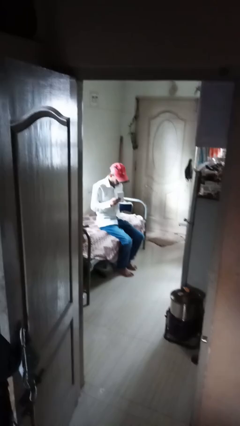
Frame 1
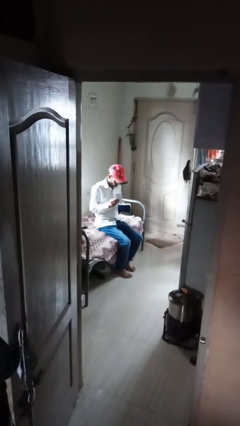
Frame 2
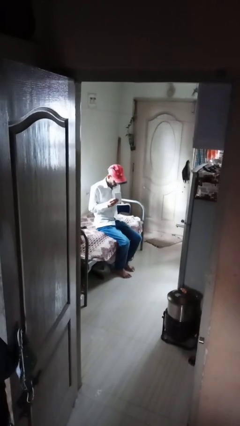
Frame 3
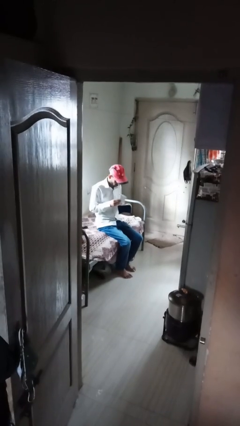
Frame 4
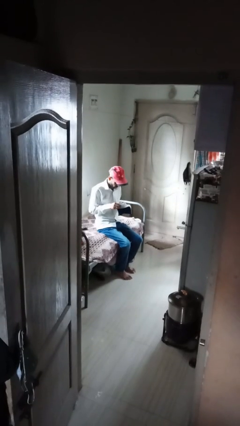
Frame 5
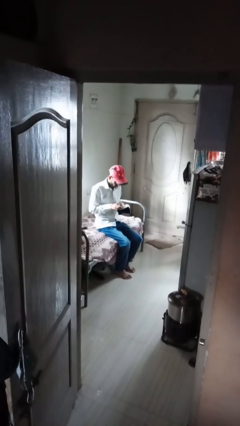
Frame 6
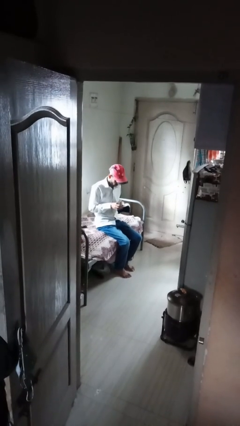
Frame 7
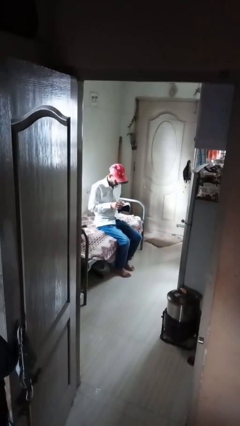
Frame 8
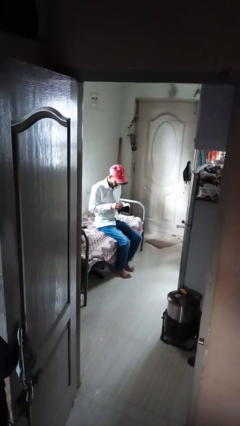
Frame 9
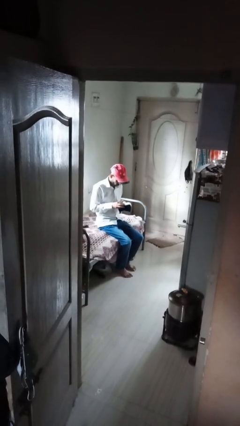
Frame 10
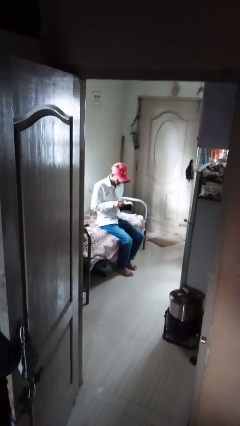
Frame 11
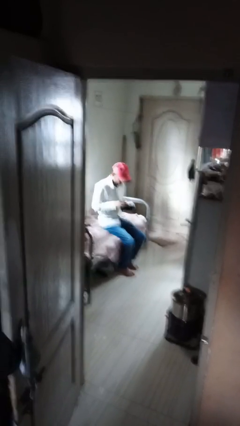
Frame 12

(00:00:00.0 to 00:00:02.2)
person puts object into purse

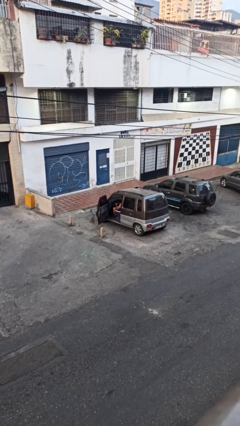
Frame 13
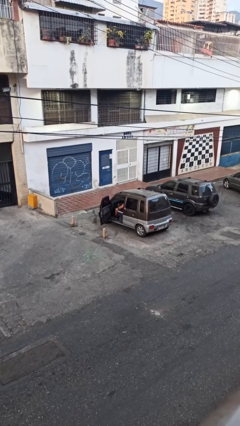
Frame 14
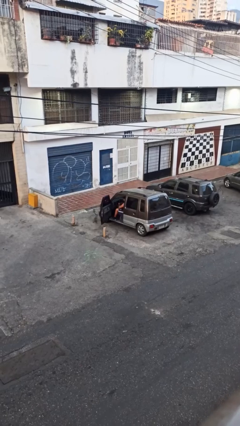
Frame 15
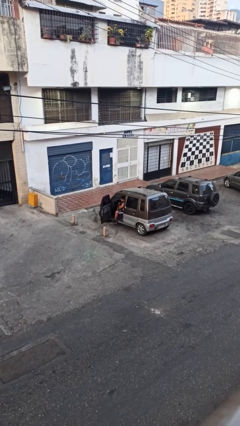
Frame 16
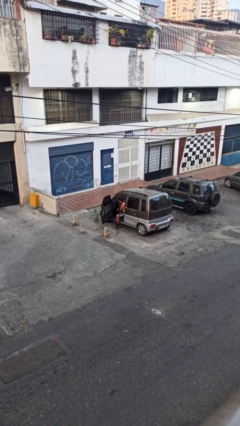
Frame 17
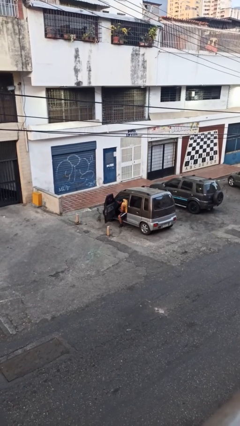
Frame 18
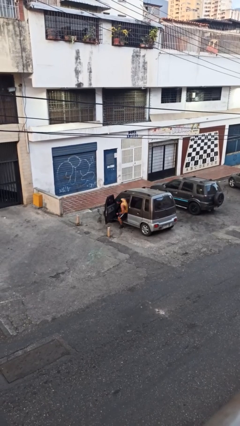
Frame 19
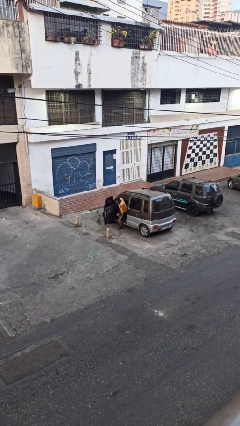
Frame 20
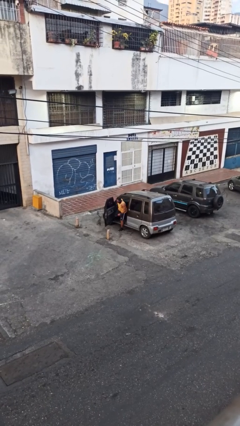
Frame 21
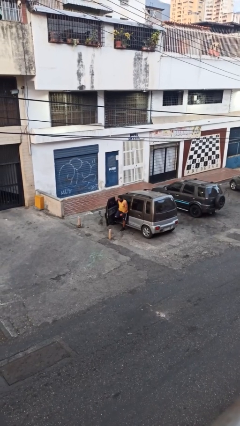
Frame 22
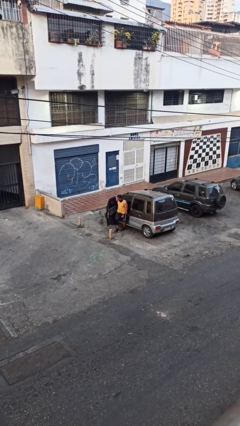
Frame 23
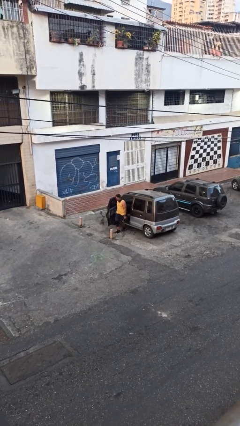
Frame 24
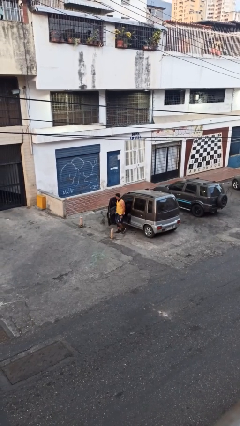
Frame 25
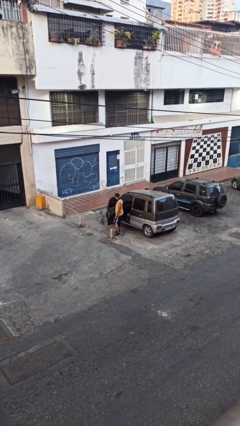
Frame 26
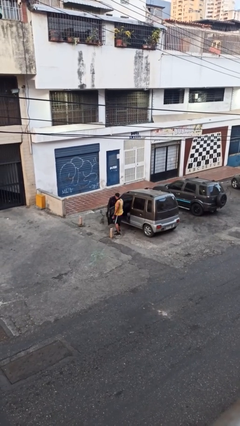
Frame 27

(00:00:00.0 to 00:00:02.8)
person exits car

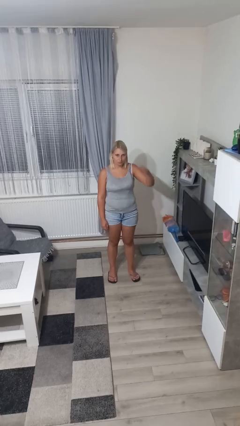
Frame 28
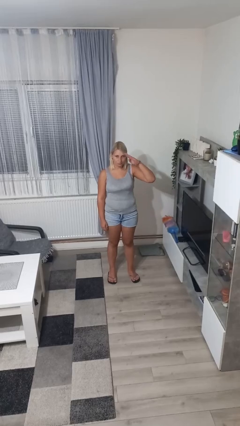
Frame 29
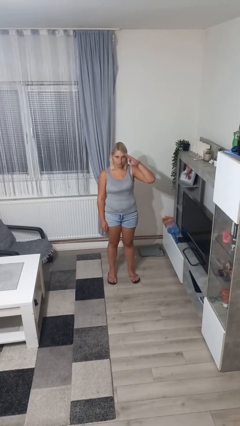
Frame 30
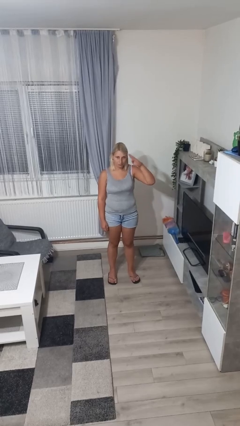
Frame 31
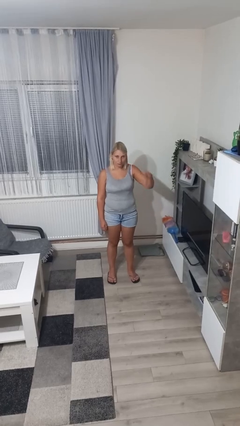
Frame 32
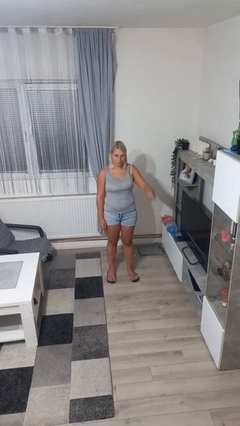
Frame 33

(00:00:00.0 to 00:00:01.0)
person salutes

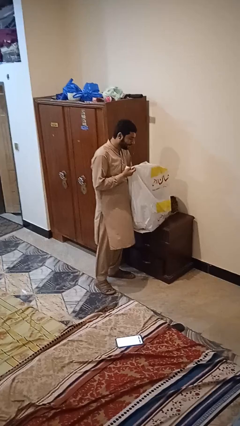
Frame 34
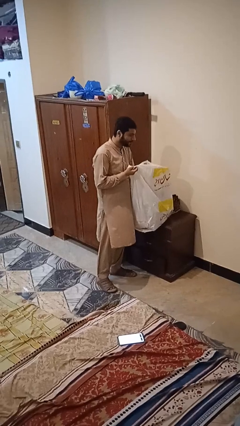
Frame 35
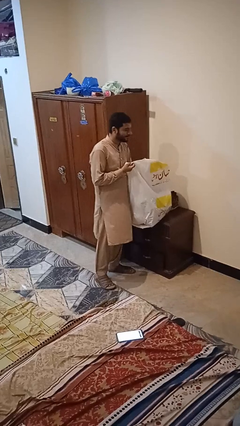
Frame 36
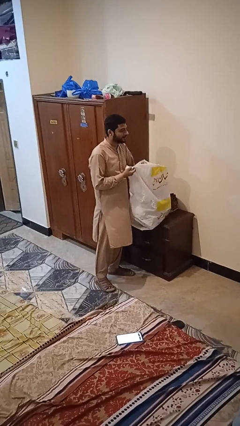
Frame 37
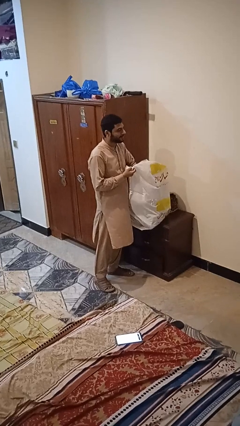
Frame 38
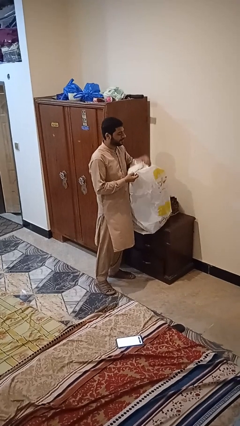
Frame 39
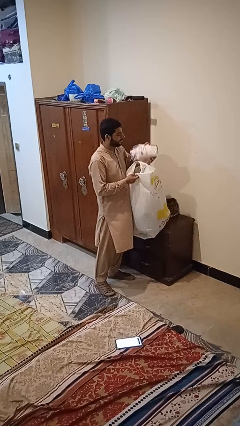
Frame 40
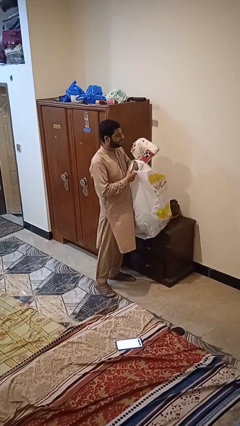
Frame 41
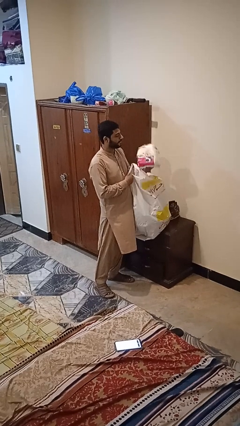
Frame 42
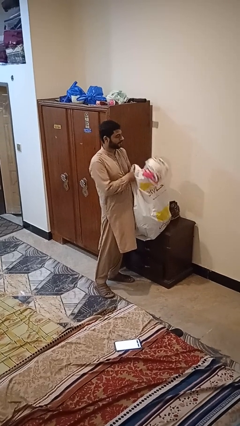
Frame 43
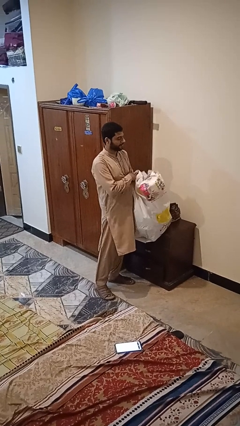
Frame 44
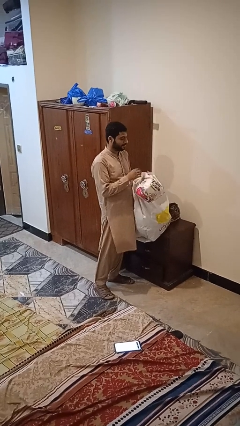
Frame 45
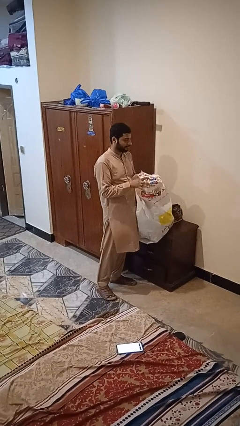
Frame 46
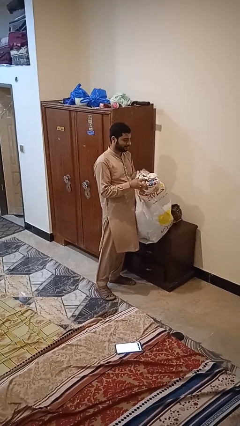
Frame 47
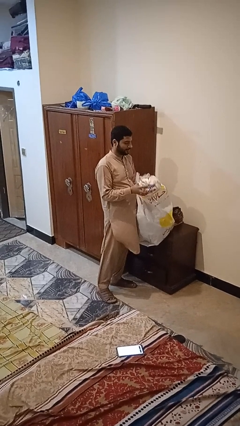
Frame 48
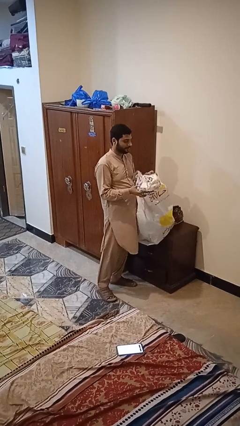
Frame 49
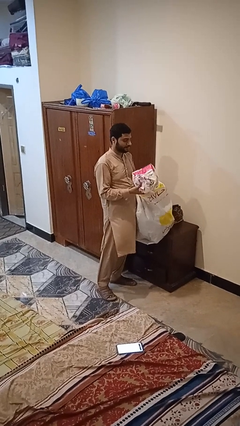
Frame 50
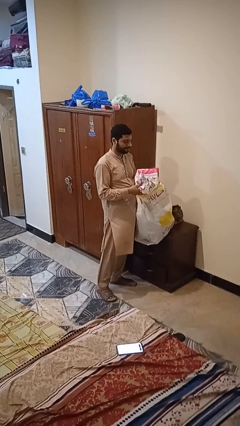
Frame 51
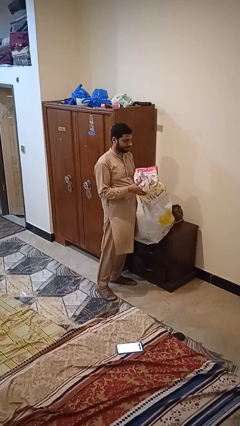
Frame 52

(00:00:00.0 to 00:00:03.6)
person takes object from bag

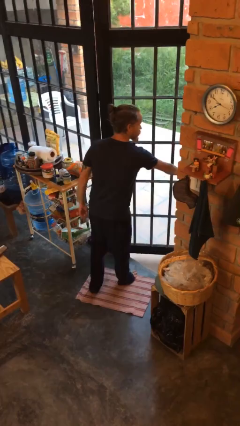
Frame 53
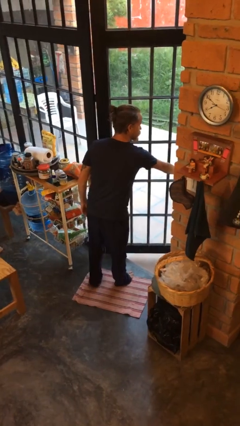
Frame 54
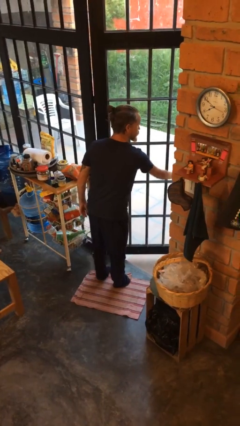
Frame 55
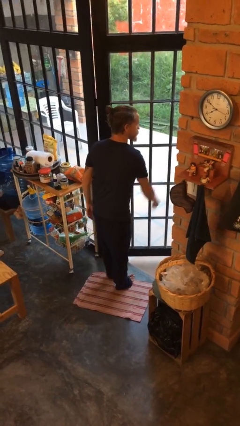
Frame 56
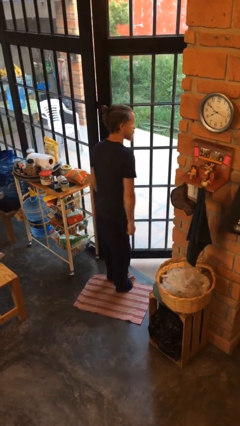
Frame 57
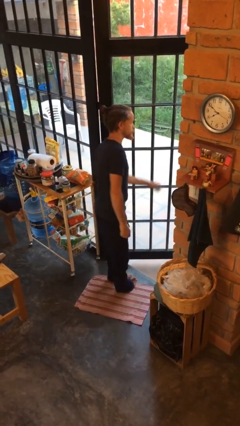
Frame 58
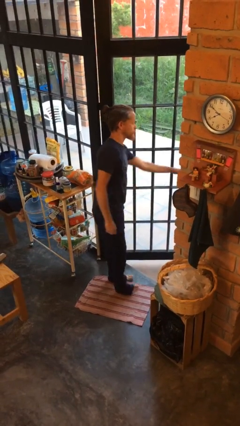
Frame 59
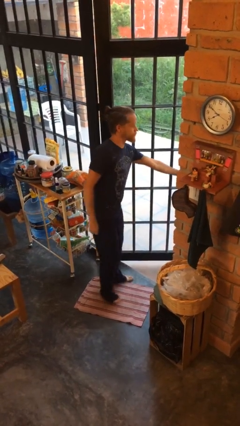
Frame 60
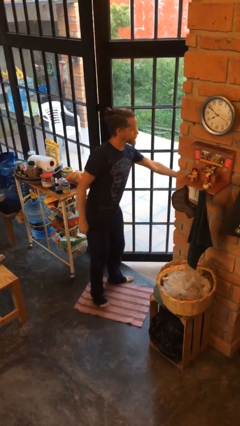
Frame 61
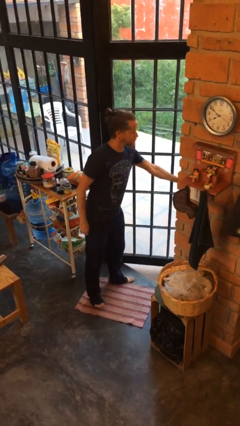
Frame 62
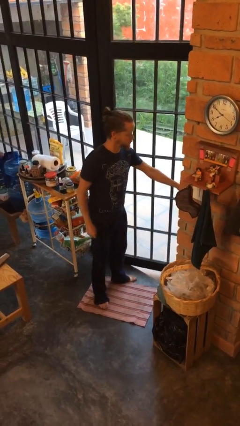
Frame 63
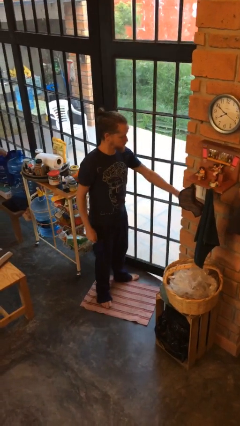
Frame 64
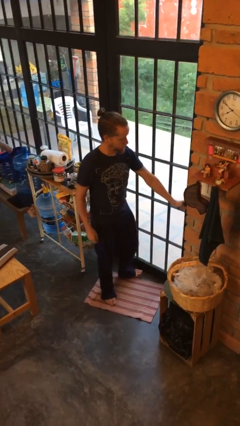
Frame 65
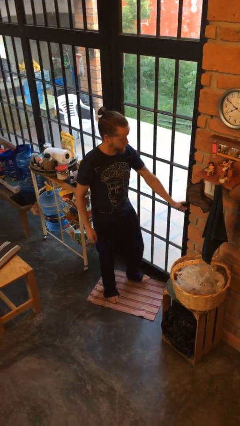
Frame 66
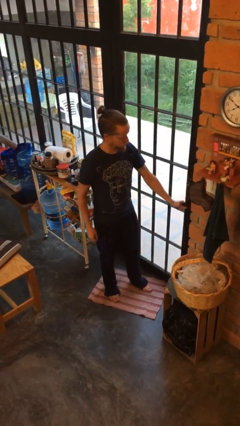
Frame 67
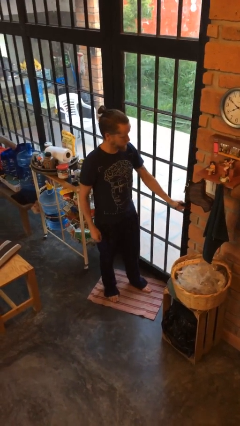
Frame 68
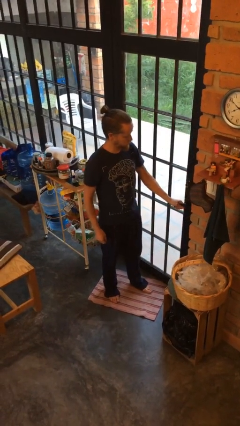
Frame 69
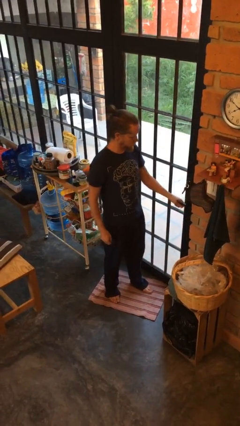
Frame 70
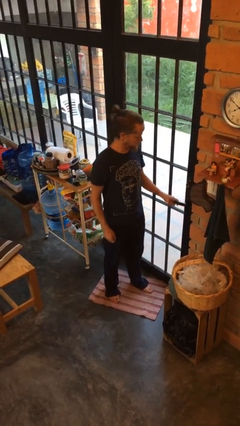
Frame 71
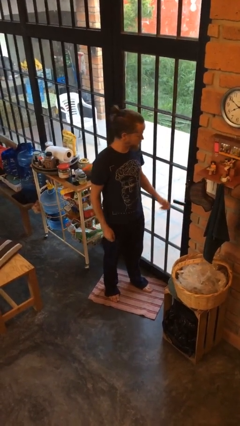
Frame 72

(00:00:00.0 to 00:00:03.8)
person closes facility door

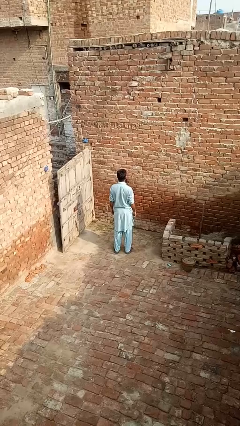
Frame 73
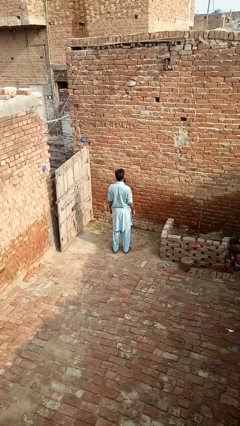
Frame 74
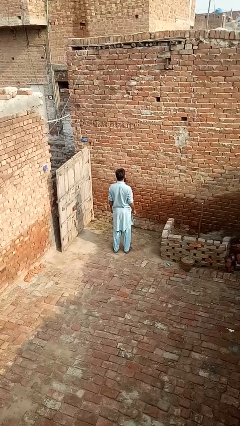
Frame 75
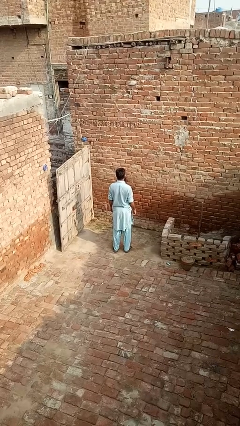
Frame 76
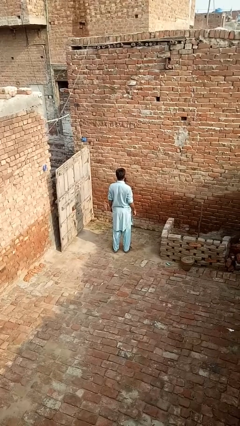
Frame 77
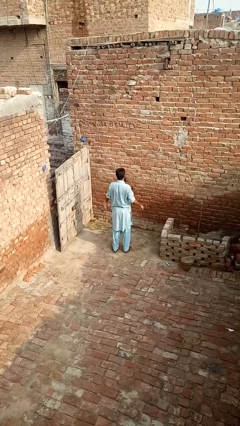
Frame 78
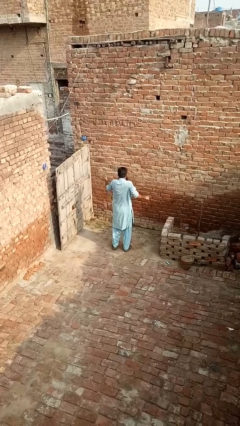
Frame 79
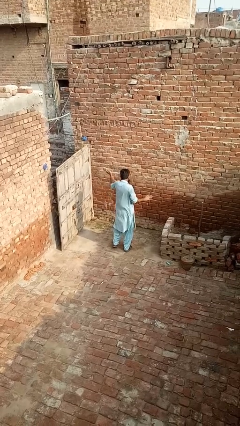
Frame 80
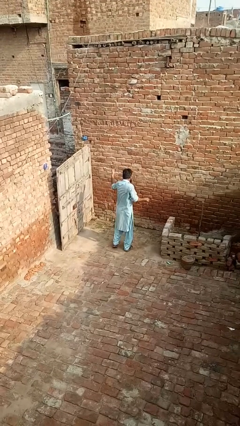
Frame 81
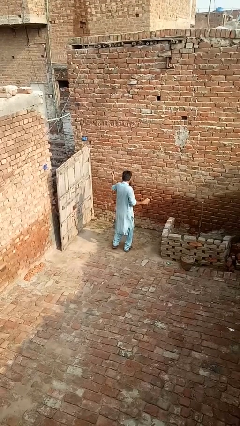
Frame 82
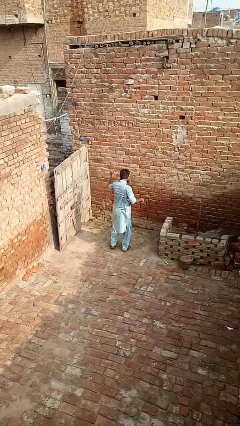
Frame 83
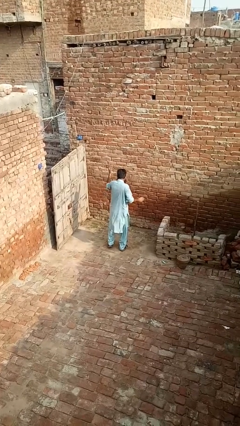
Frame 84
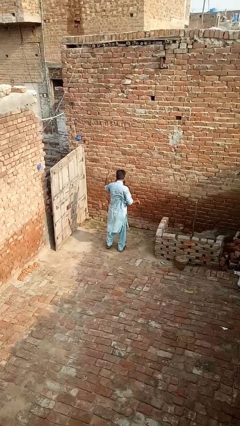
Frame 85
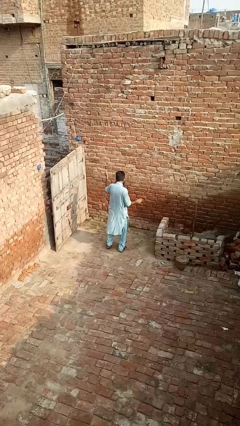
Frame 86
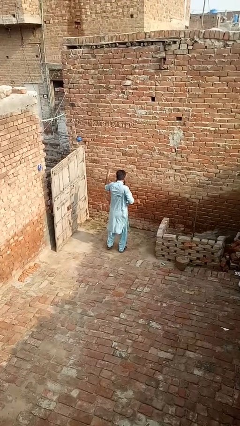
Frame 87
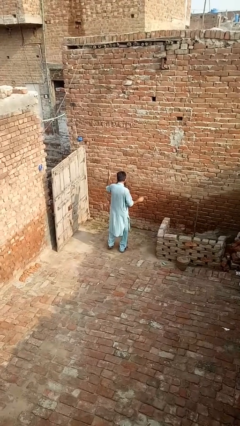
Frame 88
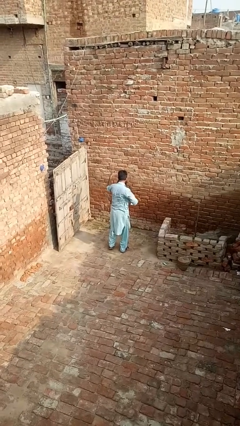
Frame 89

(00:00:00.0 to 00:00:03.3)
person dances in place

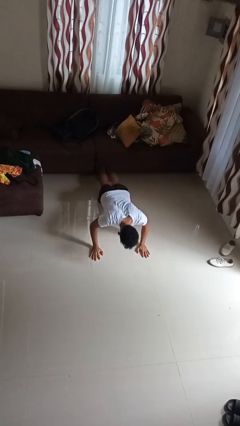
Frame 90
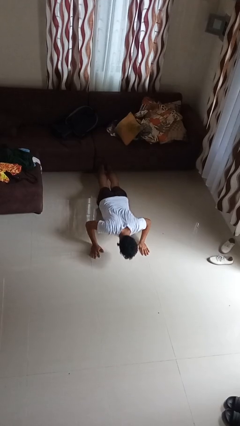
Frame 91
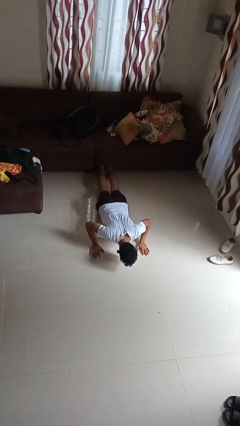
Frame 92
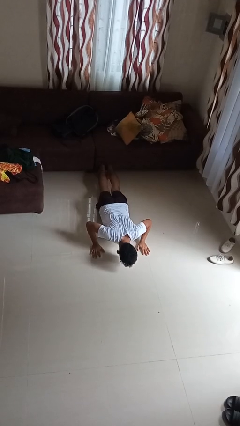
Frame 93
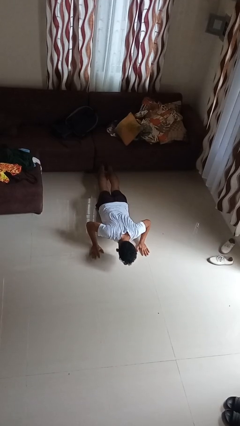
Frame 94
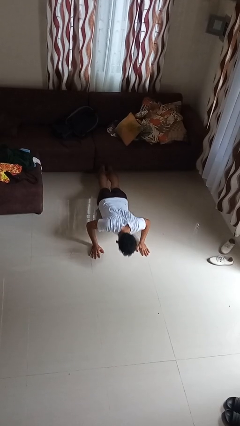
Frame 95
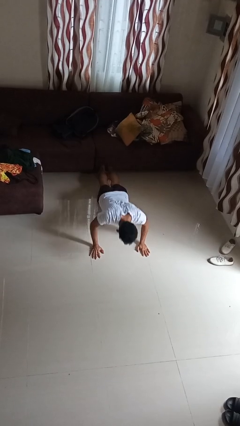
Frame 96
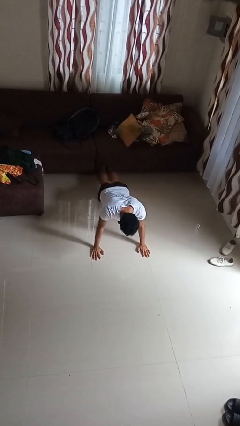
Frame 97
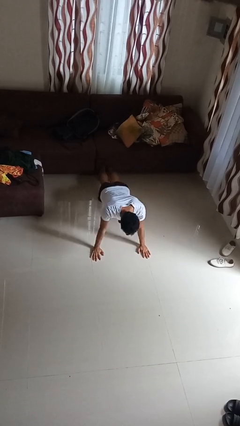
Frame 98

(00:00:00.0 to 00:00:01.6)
person exercises with pushup
